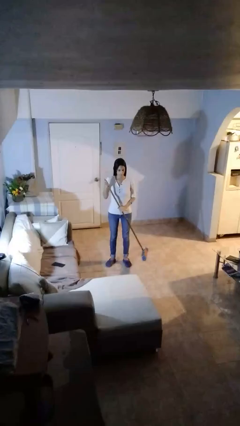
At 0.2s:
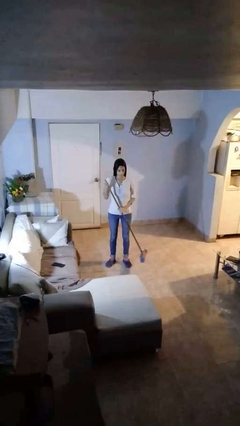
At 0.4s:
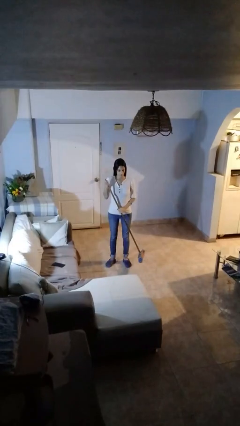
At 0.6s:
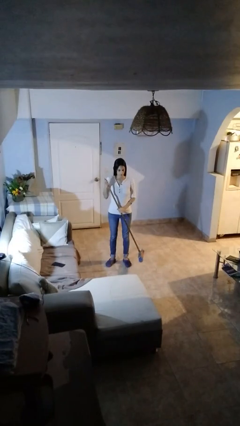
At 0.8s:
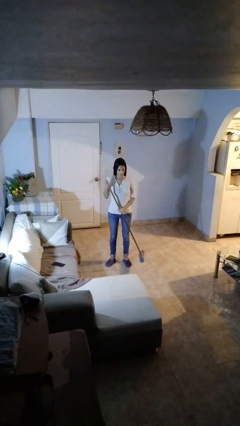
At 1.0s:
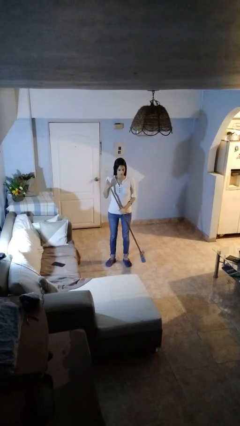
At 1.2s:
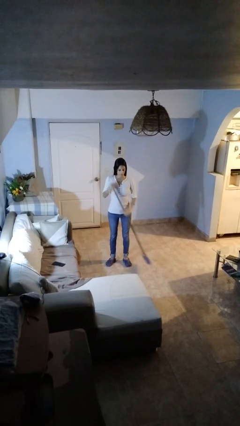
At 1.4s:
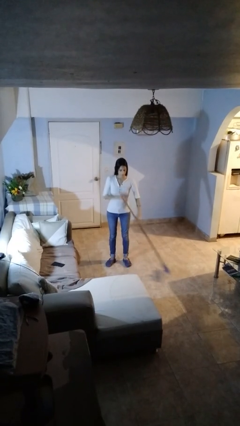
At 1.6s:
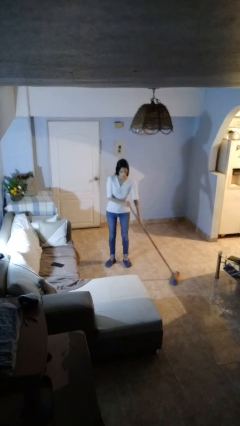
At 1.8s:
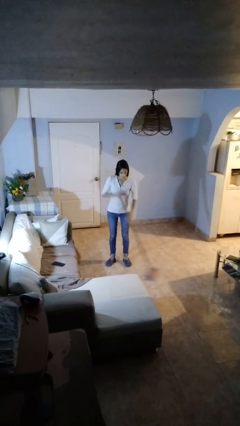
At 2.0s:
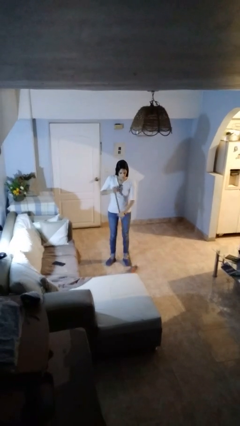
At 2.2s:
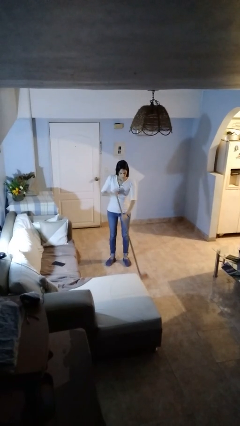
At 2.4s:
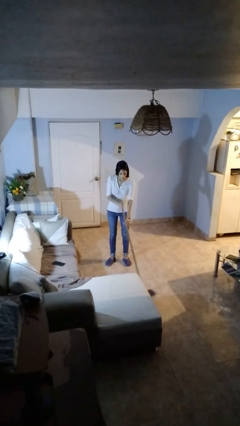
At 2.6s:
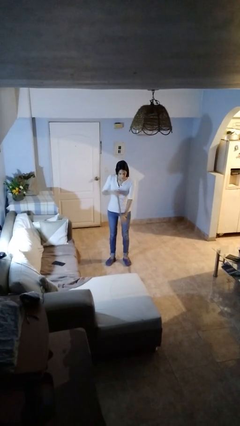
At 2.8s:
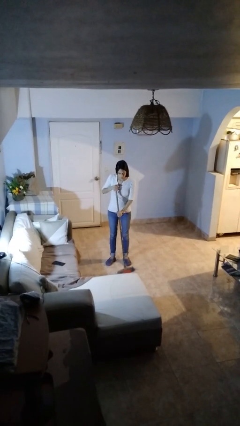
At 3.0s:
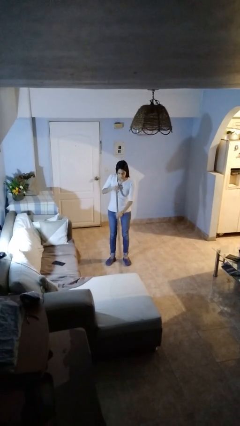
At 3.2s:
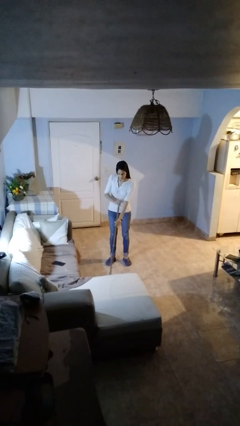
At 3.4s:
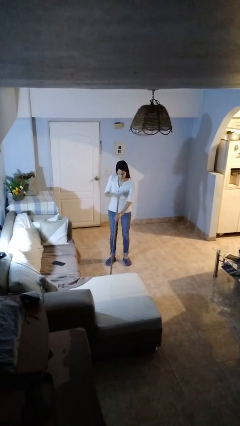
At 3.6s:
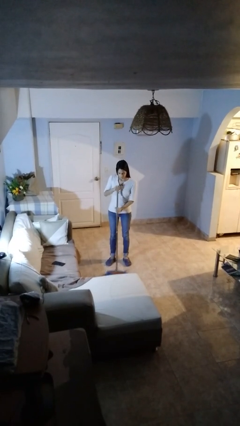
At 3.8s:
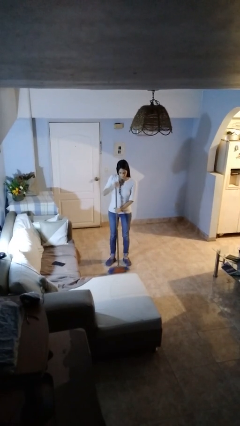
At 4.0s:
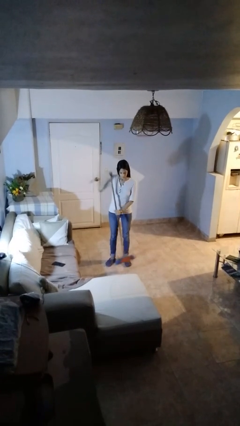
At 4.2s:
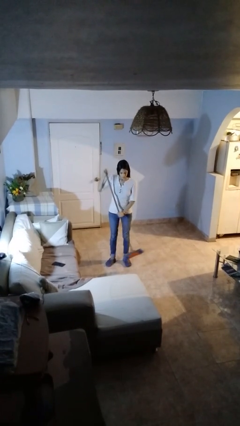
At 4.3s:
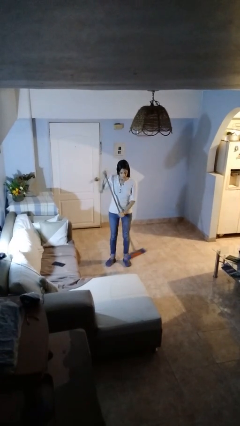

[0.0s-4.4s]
person sweeps floor

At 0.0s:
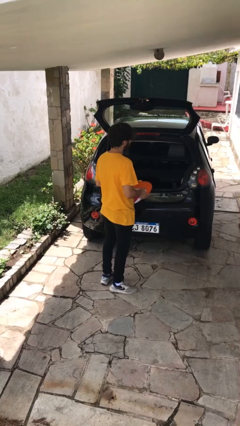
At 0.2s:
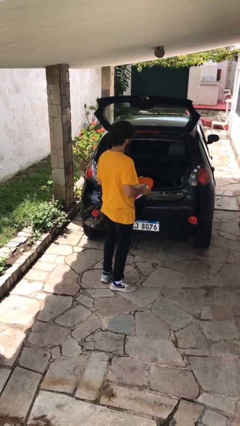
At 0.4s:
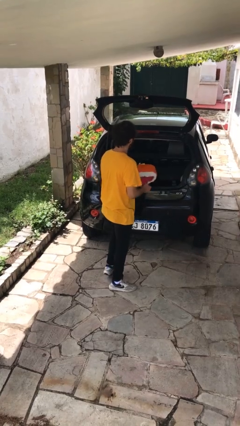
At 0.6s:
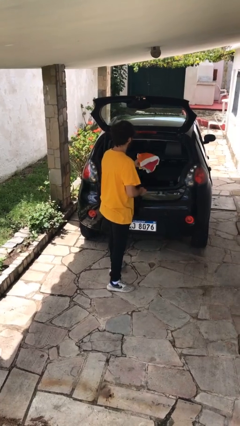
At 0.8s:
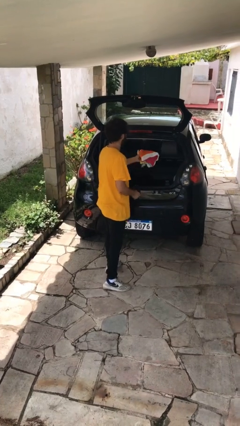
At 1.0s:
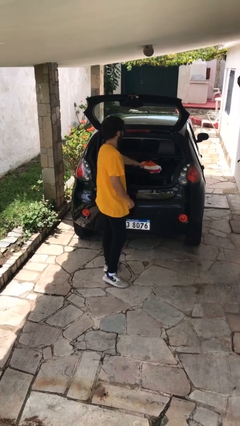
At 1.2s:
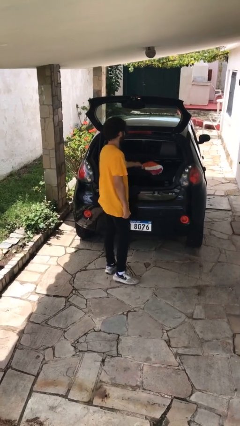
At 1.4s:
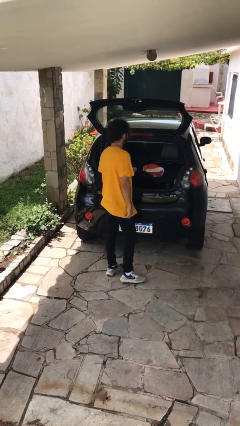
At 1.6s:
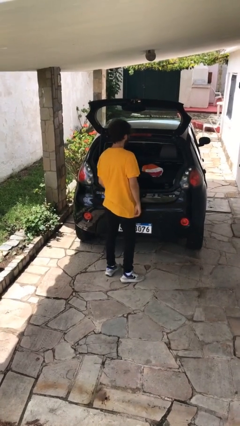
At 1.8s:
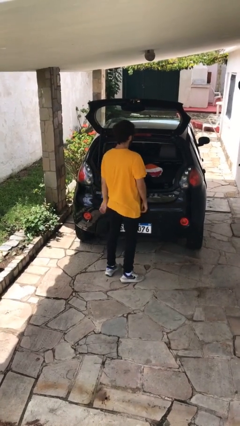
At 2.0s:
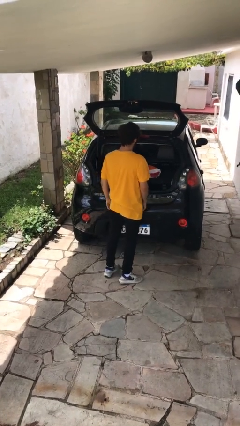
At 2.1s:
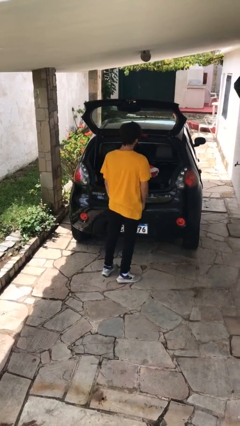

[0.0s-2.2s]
person loads car

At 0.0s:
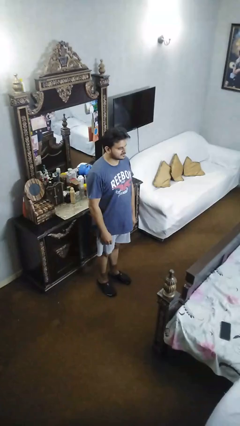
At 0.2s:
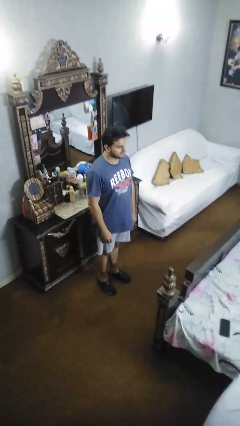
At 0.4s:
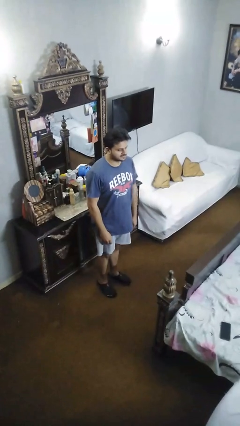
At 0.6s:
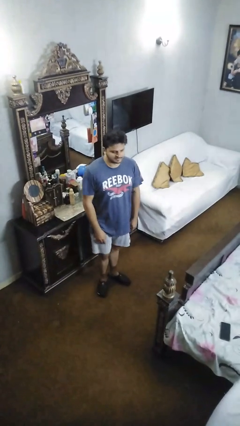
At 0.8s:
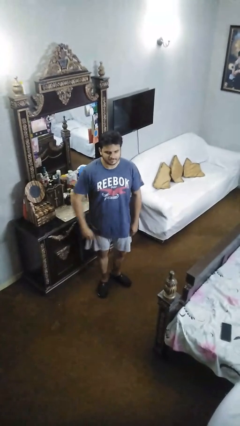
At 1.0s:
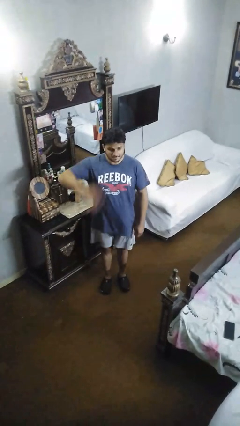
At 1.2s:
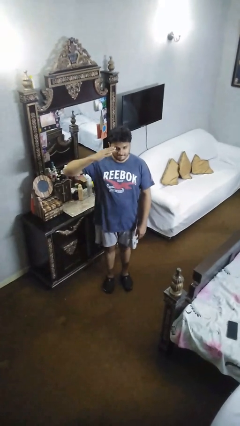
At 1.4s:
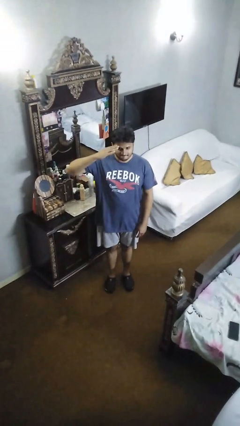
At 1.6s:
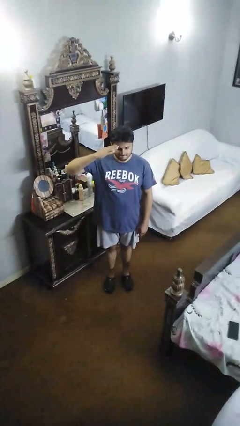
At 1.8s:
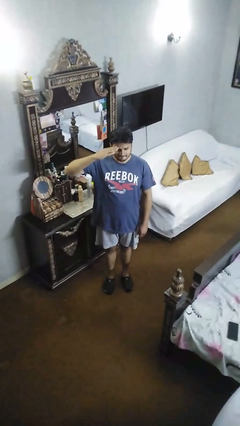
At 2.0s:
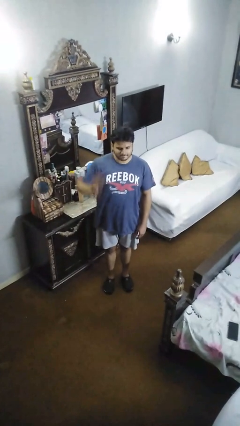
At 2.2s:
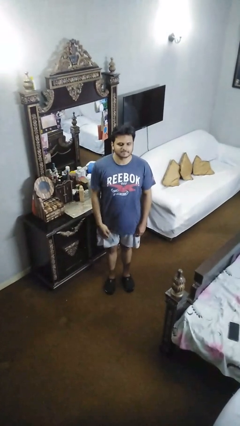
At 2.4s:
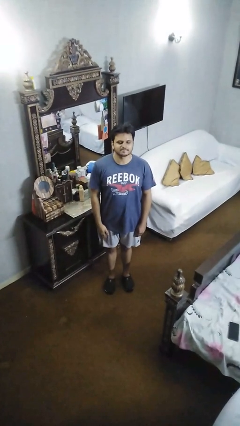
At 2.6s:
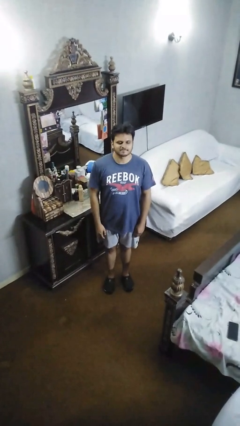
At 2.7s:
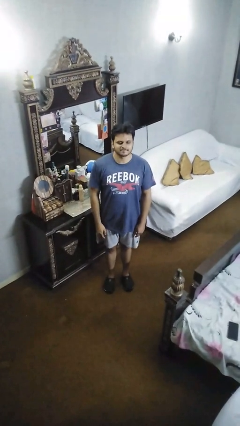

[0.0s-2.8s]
person salutes

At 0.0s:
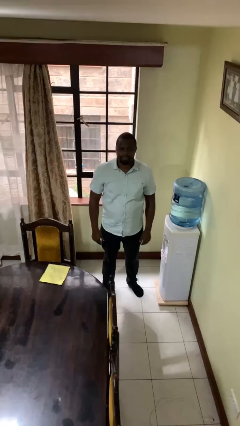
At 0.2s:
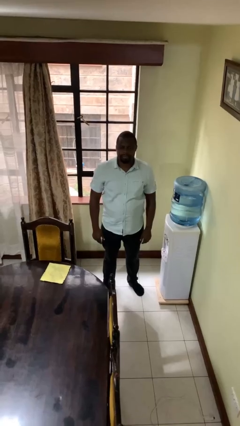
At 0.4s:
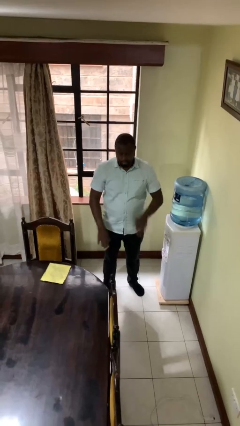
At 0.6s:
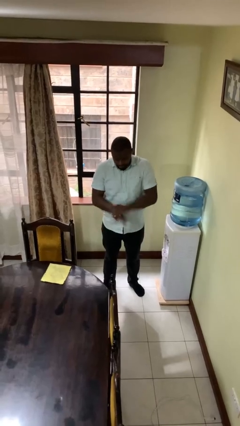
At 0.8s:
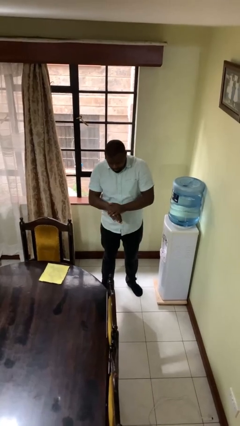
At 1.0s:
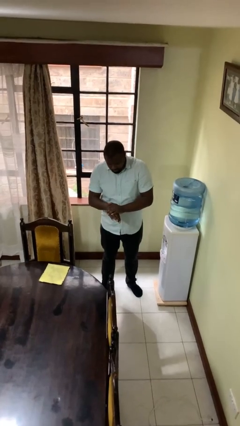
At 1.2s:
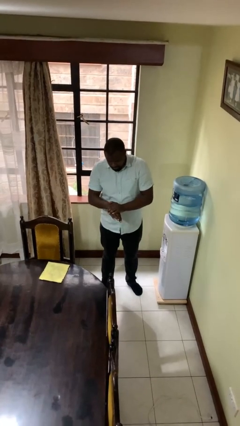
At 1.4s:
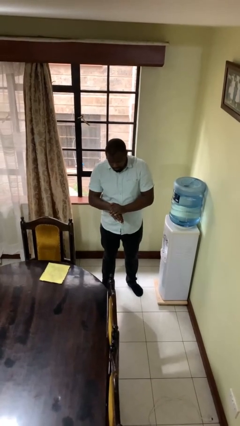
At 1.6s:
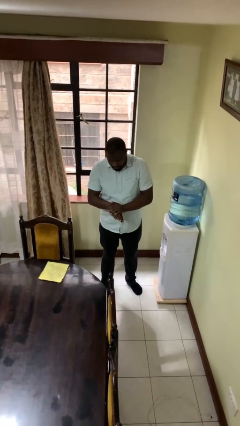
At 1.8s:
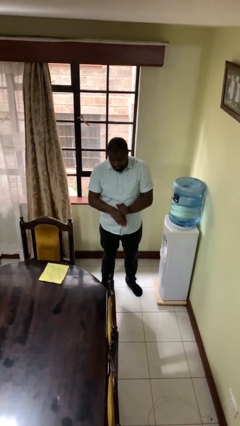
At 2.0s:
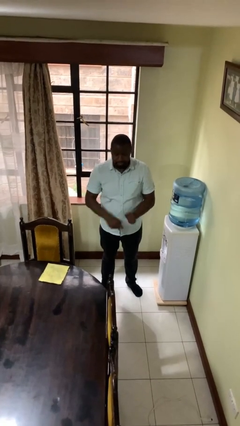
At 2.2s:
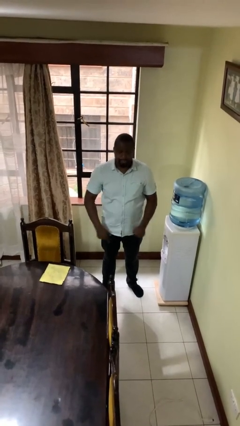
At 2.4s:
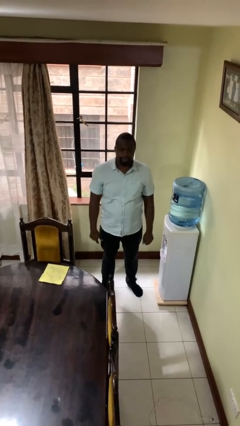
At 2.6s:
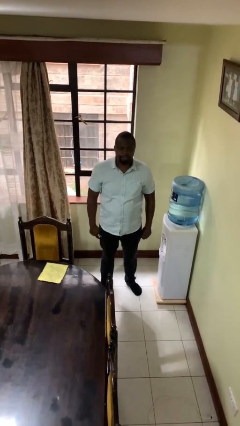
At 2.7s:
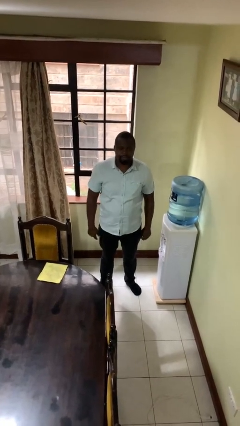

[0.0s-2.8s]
person swats bug

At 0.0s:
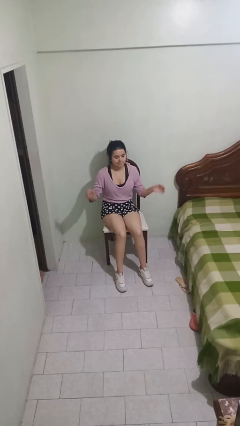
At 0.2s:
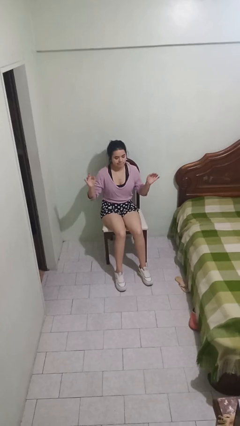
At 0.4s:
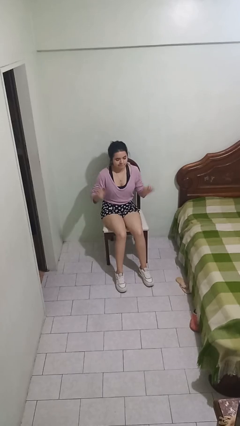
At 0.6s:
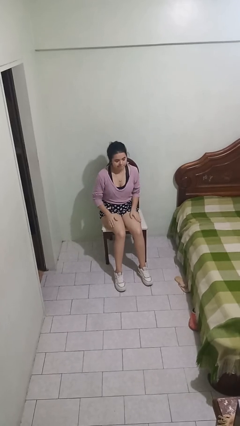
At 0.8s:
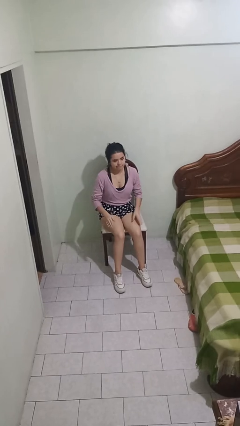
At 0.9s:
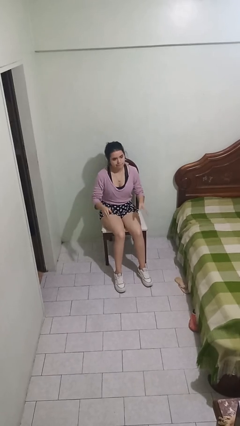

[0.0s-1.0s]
person slaps hands on thighs

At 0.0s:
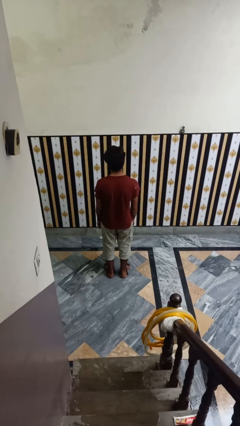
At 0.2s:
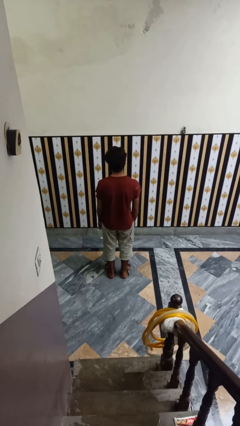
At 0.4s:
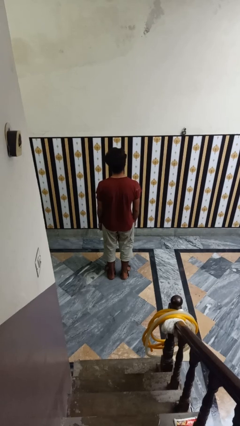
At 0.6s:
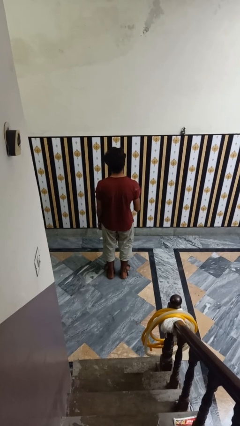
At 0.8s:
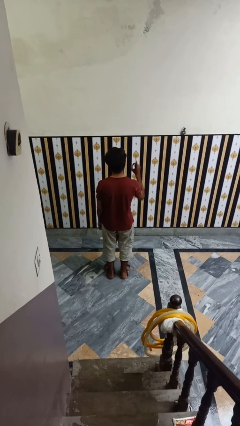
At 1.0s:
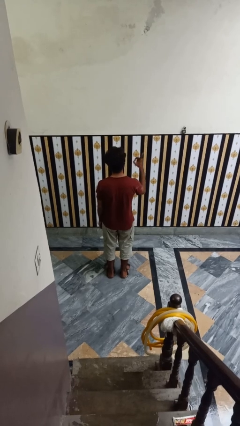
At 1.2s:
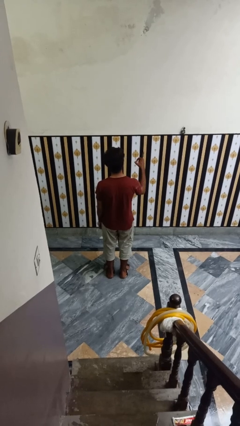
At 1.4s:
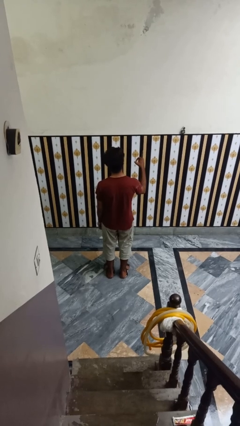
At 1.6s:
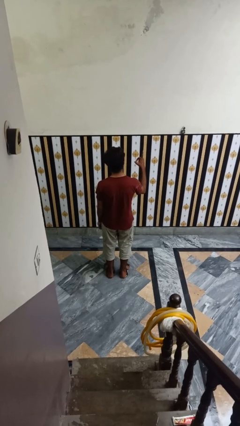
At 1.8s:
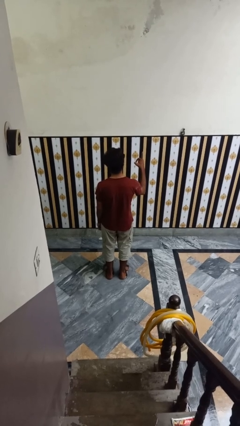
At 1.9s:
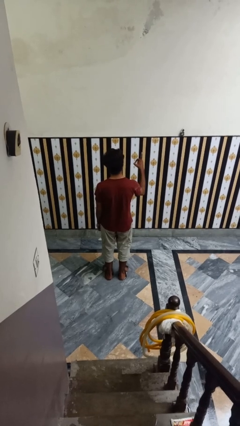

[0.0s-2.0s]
person gestures number one

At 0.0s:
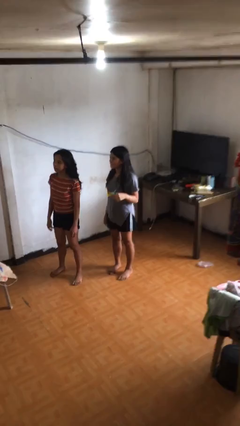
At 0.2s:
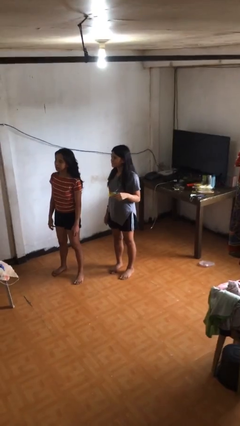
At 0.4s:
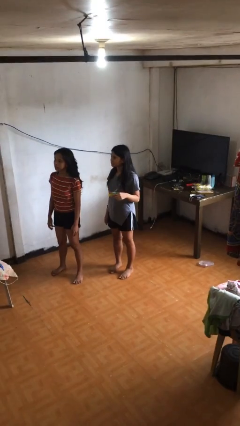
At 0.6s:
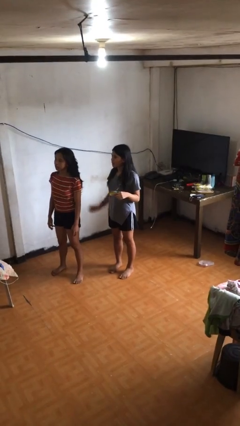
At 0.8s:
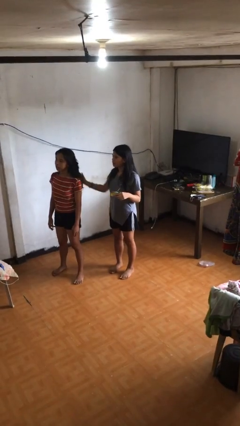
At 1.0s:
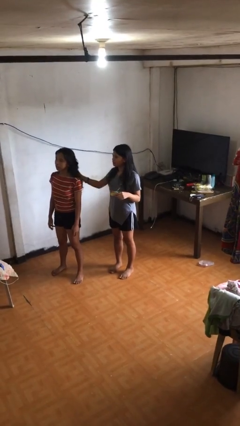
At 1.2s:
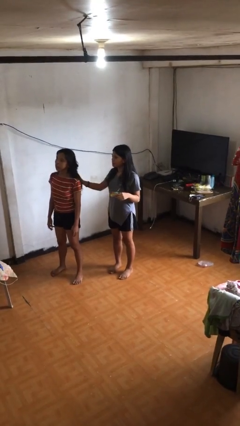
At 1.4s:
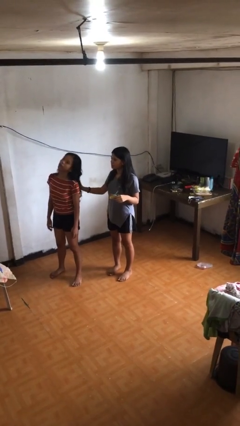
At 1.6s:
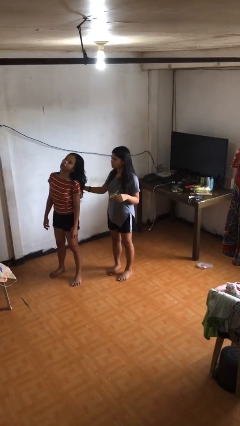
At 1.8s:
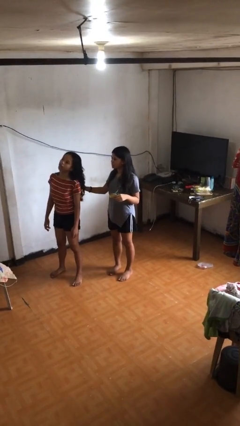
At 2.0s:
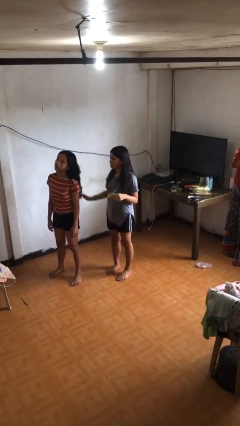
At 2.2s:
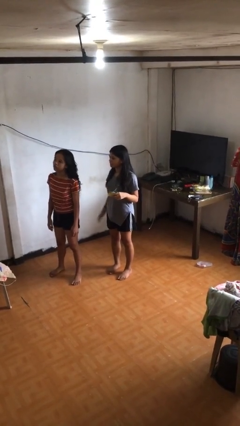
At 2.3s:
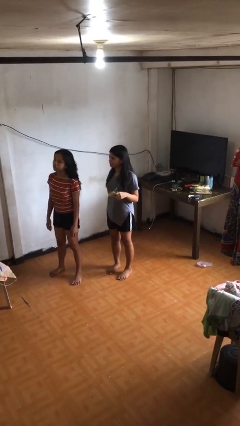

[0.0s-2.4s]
person grabs person by hair
